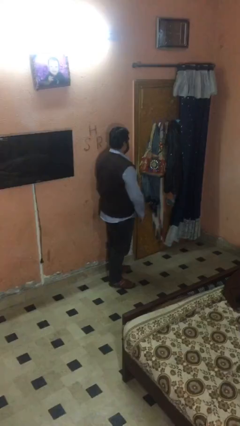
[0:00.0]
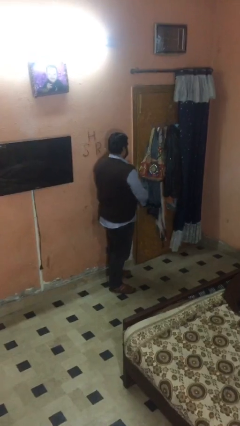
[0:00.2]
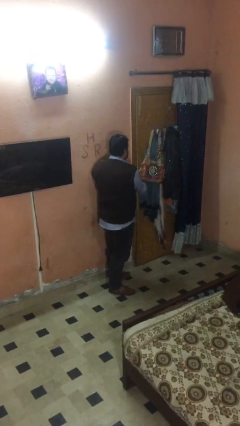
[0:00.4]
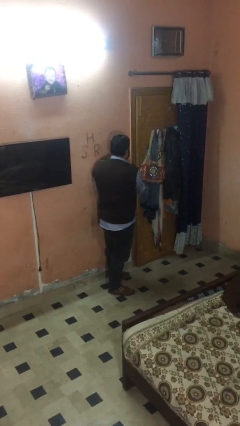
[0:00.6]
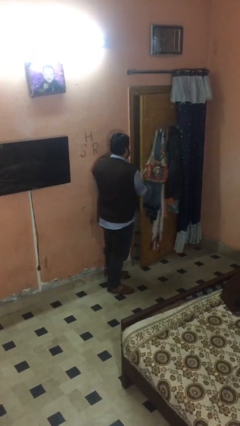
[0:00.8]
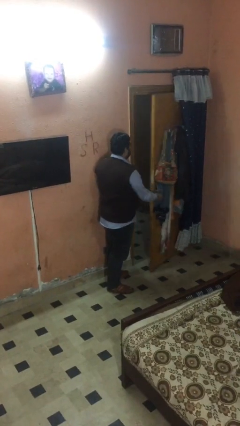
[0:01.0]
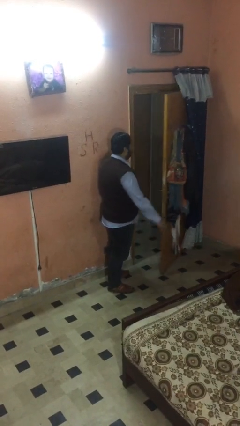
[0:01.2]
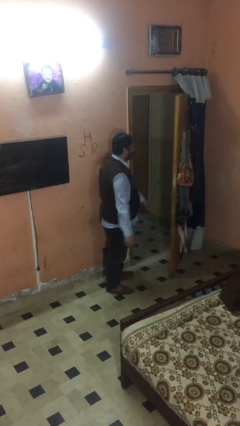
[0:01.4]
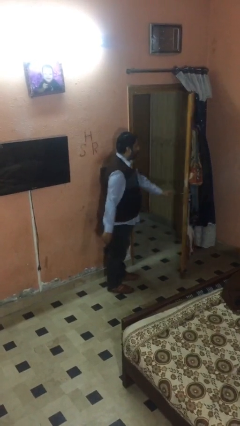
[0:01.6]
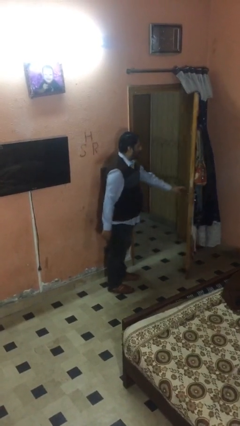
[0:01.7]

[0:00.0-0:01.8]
person opens facility door

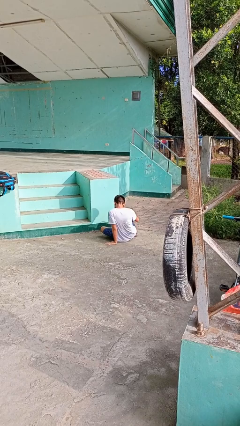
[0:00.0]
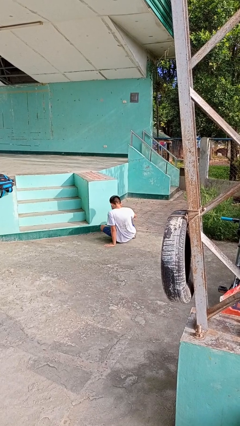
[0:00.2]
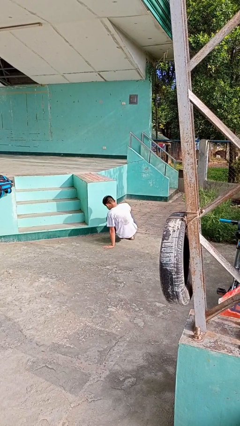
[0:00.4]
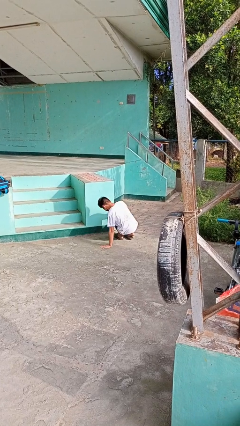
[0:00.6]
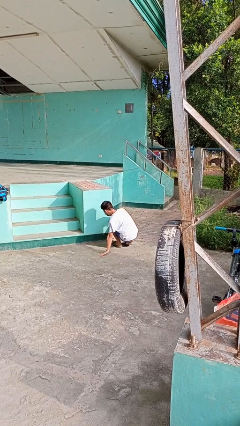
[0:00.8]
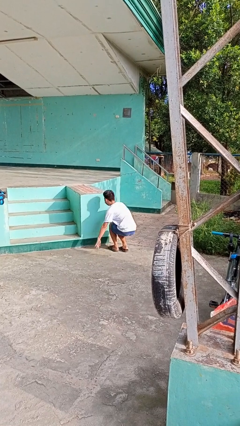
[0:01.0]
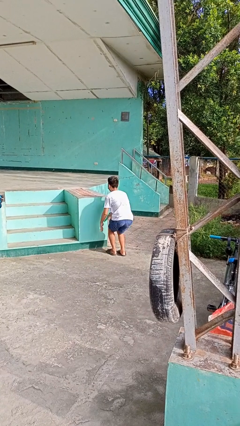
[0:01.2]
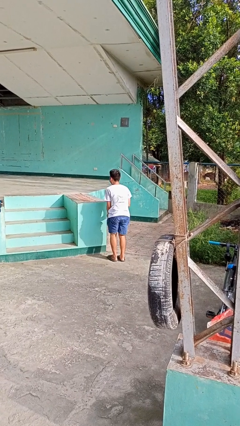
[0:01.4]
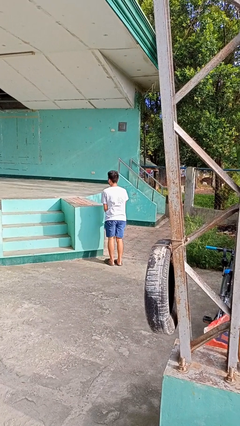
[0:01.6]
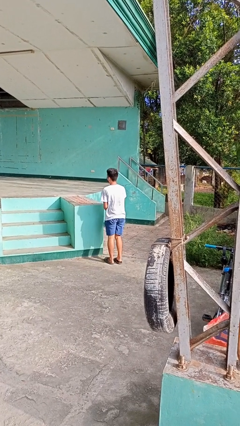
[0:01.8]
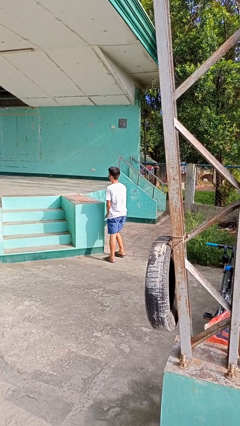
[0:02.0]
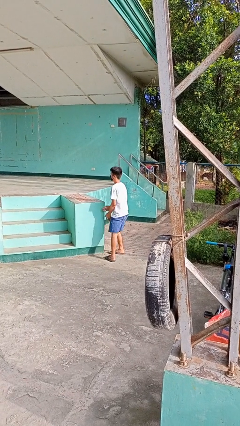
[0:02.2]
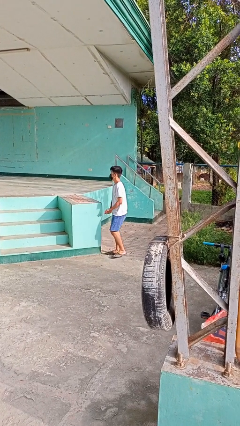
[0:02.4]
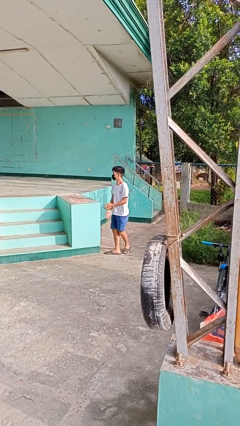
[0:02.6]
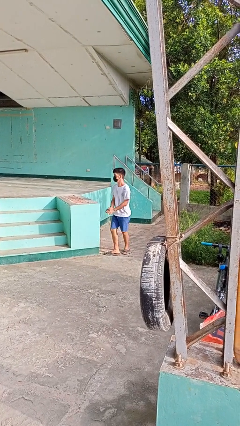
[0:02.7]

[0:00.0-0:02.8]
person stands up from floor

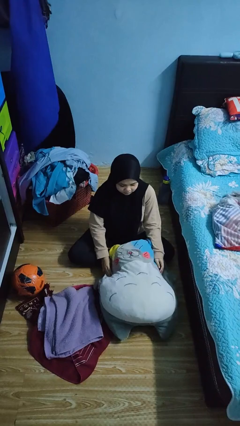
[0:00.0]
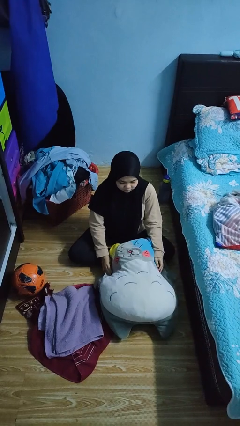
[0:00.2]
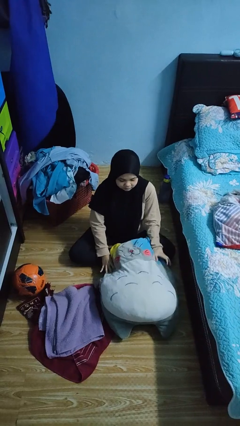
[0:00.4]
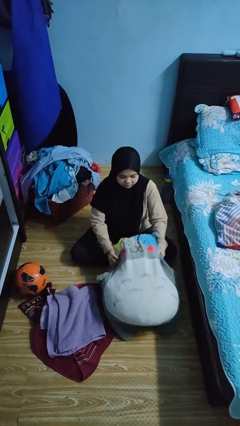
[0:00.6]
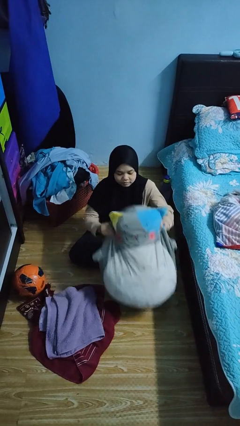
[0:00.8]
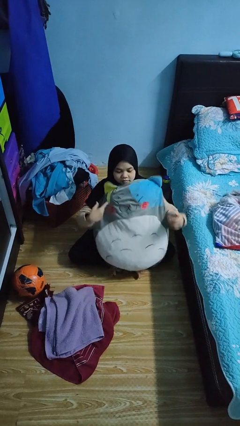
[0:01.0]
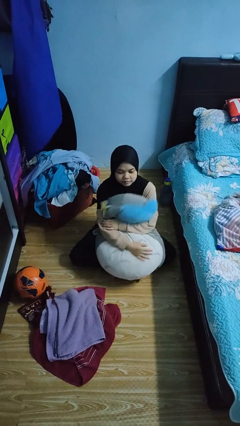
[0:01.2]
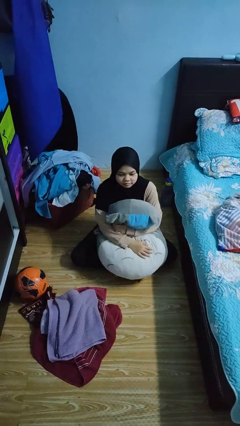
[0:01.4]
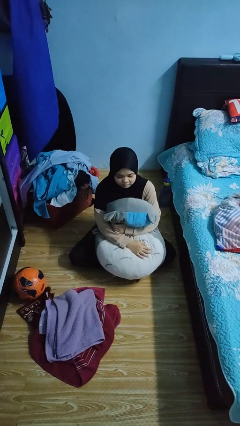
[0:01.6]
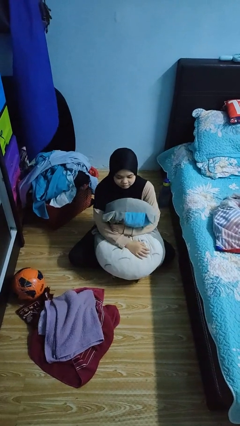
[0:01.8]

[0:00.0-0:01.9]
person hugs stuffed animal

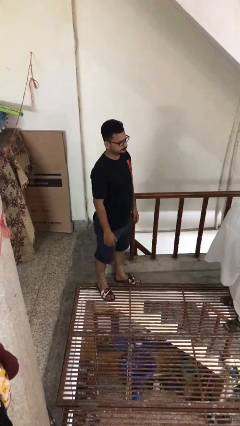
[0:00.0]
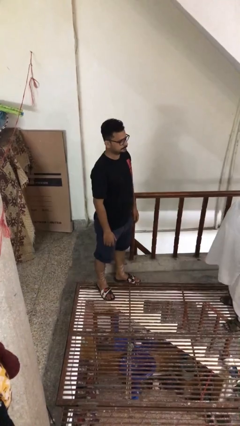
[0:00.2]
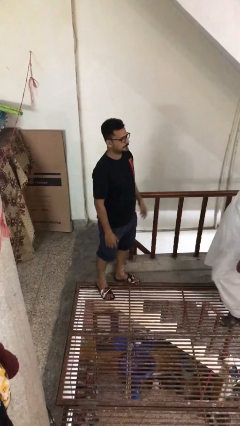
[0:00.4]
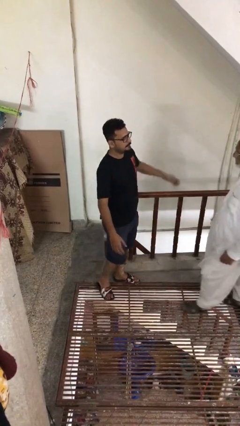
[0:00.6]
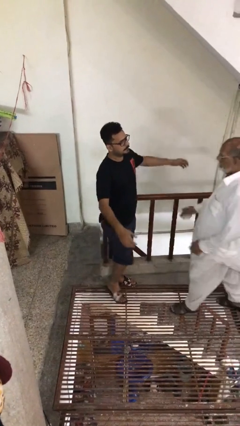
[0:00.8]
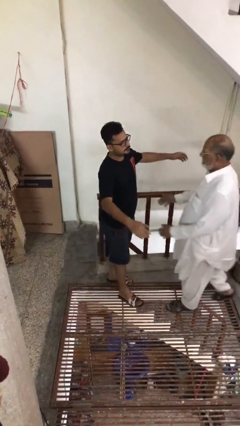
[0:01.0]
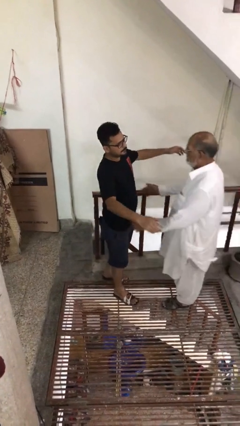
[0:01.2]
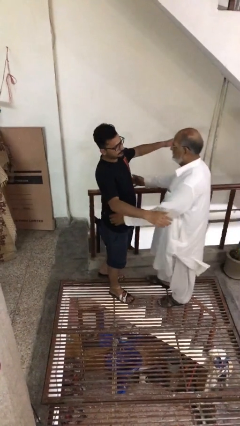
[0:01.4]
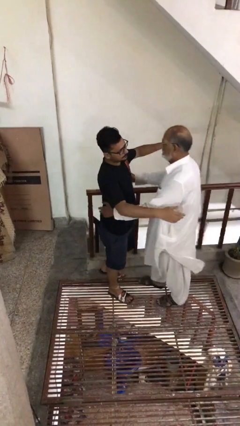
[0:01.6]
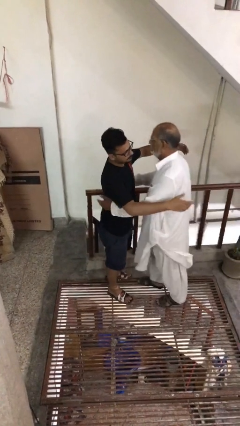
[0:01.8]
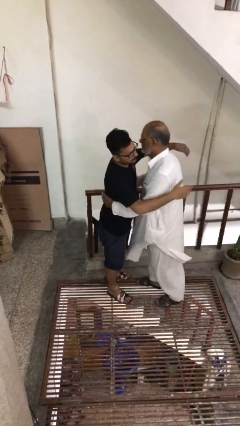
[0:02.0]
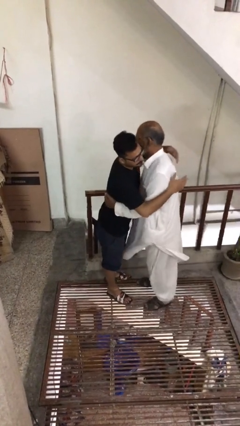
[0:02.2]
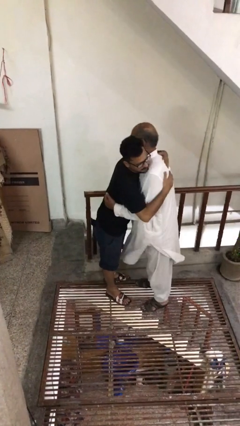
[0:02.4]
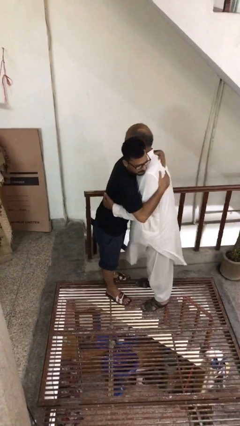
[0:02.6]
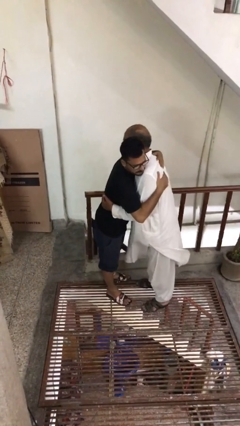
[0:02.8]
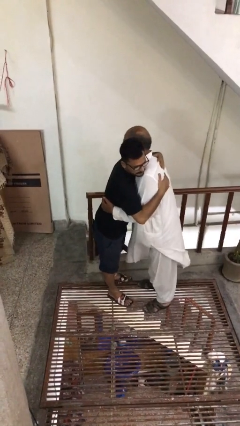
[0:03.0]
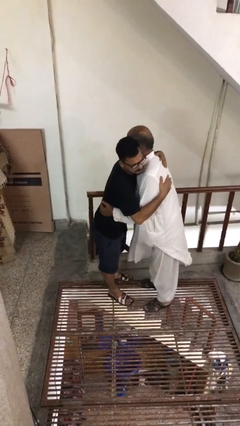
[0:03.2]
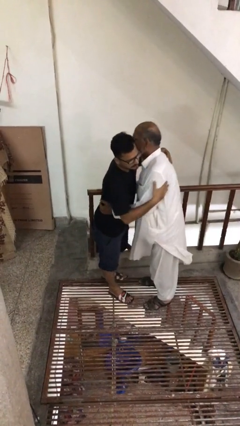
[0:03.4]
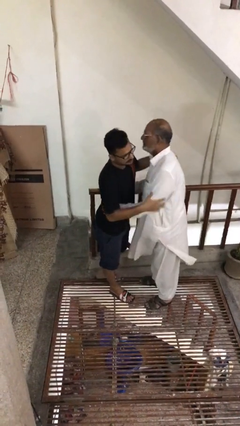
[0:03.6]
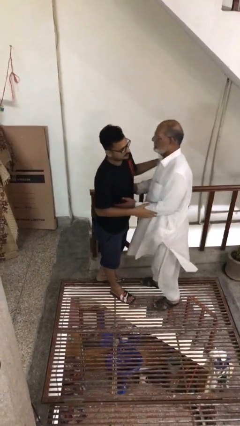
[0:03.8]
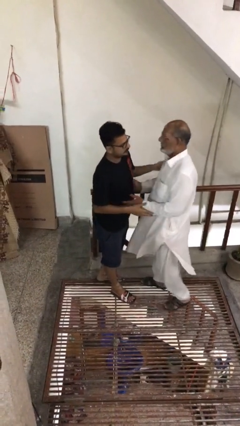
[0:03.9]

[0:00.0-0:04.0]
person embraces person

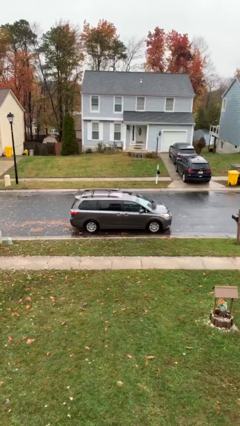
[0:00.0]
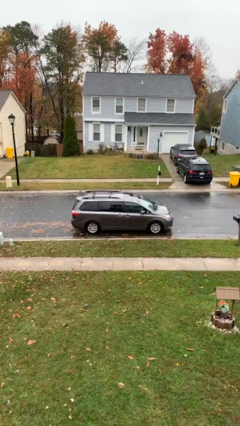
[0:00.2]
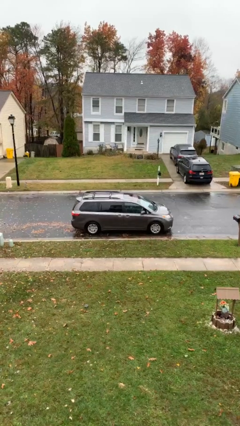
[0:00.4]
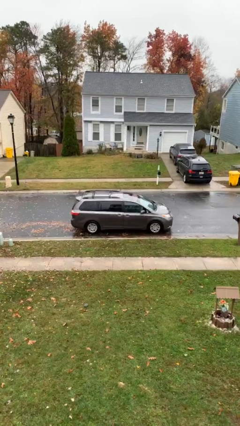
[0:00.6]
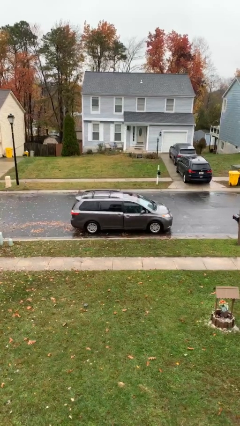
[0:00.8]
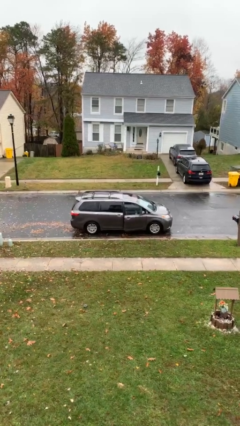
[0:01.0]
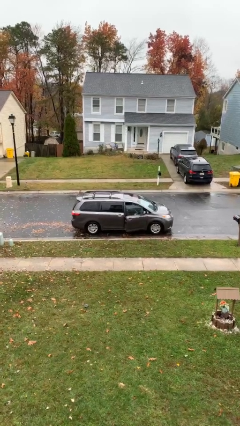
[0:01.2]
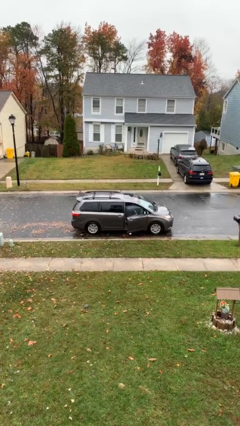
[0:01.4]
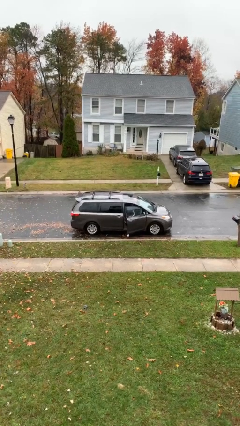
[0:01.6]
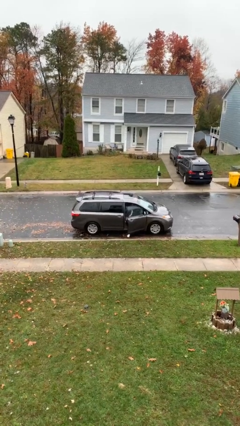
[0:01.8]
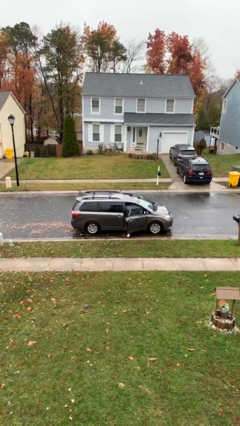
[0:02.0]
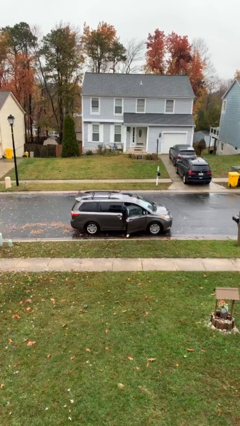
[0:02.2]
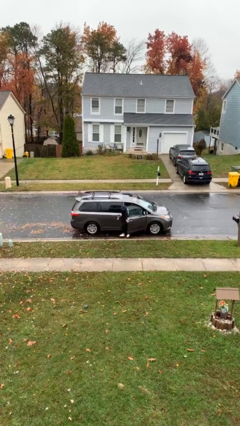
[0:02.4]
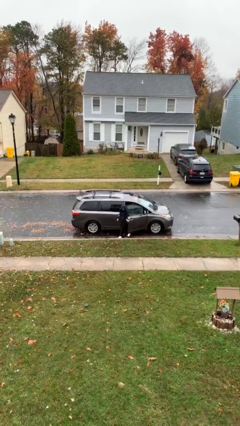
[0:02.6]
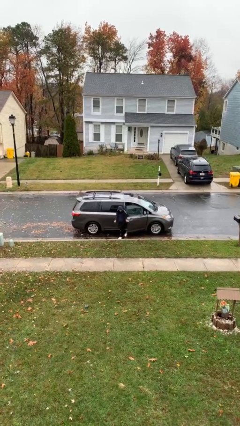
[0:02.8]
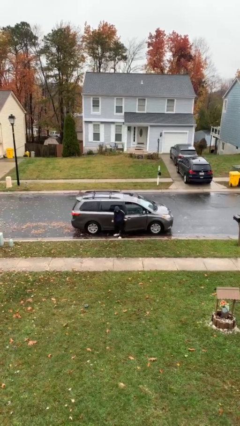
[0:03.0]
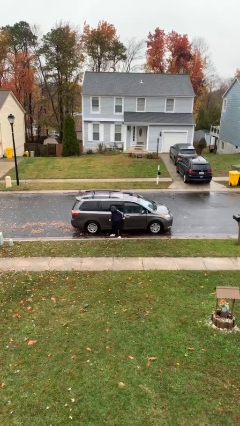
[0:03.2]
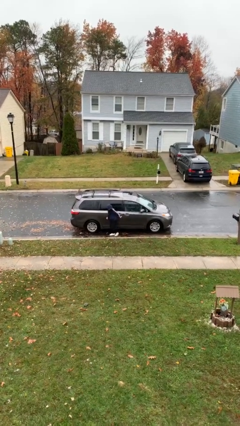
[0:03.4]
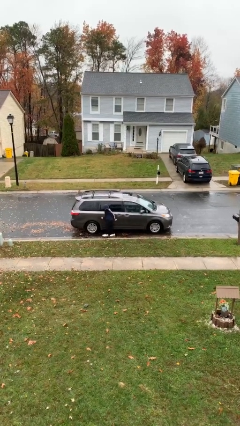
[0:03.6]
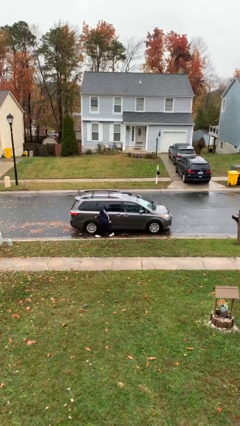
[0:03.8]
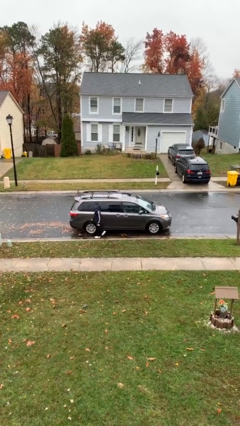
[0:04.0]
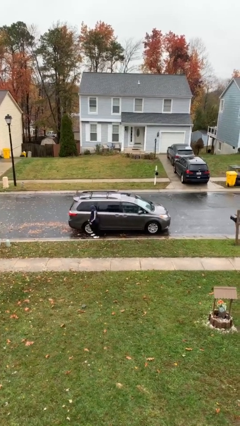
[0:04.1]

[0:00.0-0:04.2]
car drops off person

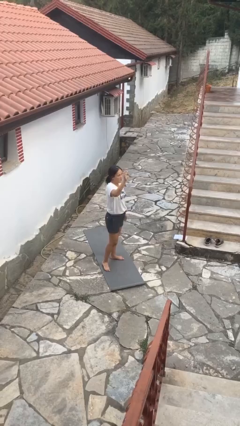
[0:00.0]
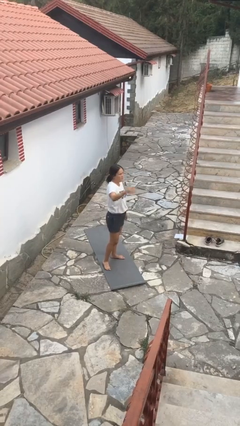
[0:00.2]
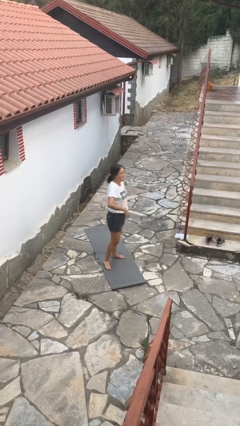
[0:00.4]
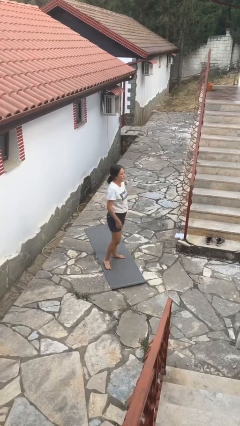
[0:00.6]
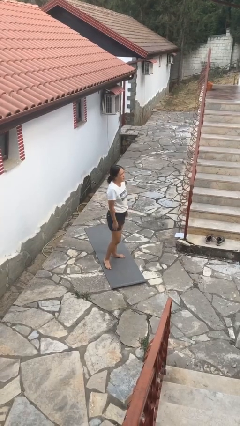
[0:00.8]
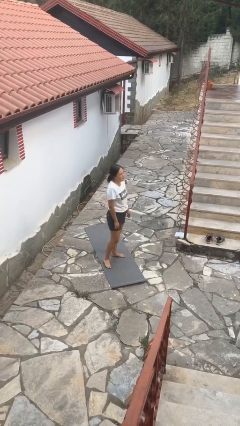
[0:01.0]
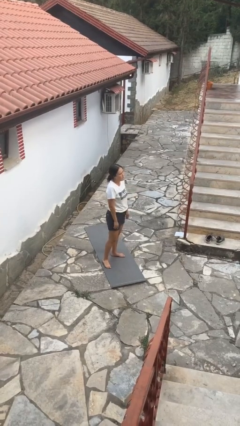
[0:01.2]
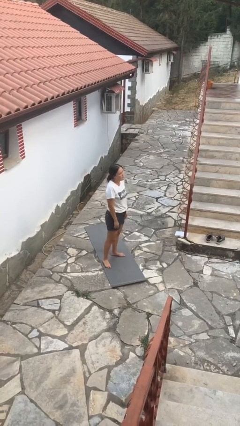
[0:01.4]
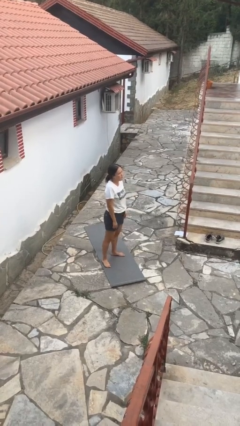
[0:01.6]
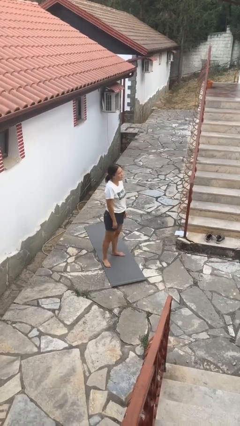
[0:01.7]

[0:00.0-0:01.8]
person gestures lower hand

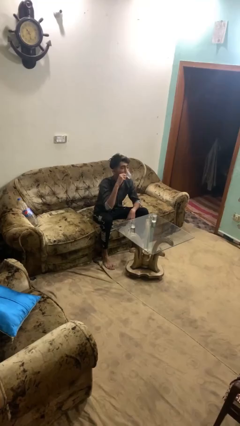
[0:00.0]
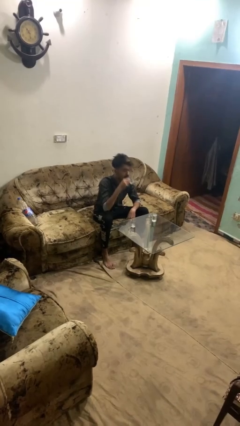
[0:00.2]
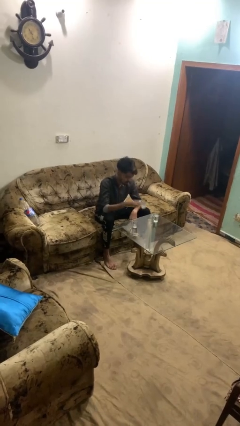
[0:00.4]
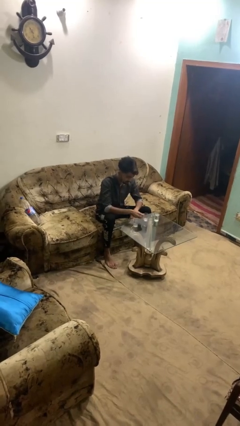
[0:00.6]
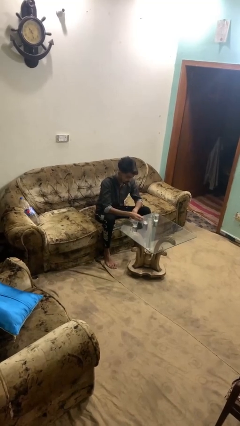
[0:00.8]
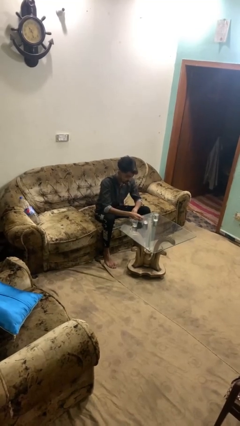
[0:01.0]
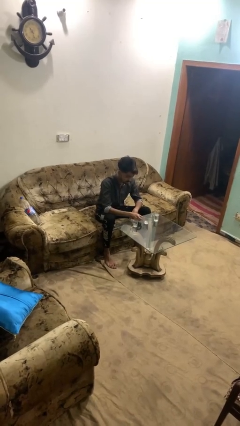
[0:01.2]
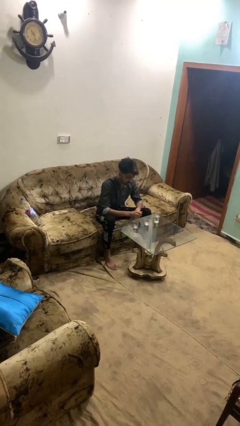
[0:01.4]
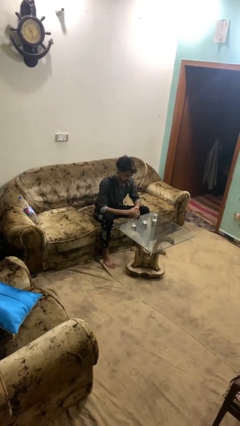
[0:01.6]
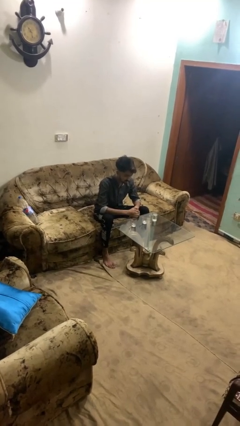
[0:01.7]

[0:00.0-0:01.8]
person puts down object on table
